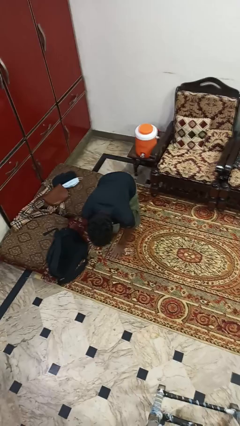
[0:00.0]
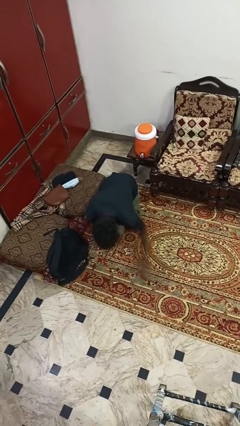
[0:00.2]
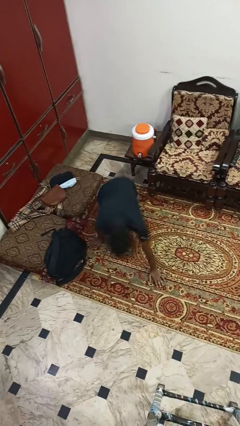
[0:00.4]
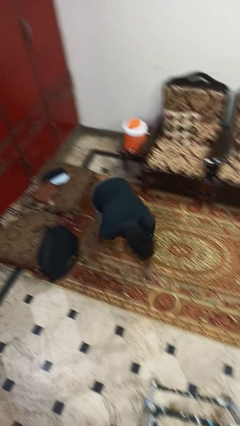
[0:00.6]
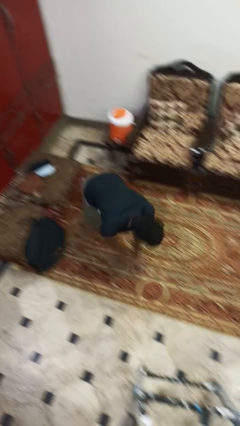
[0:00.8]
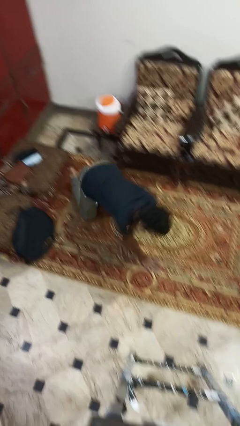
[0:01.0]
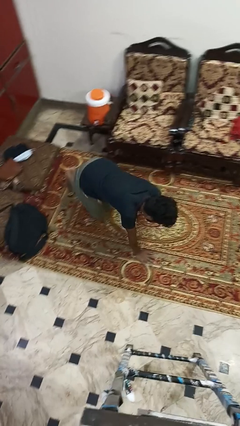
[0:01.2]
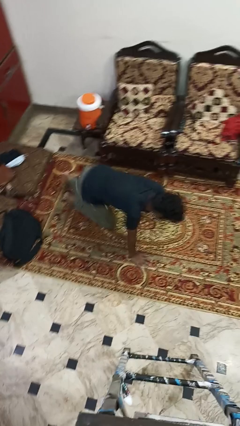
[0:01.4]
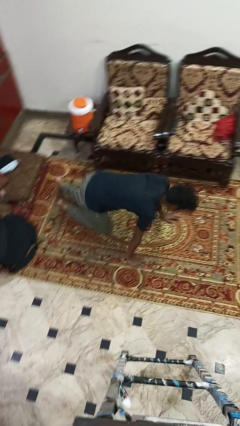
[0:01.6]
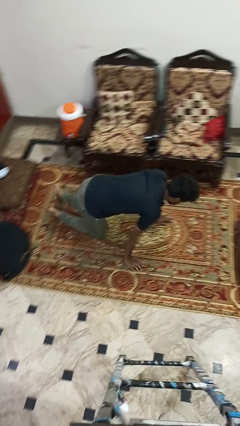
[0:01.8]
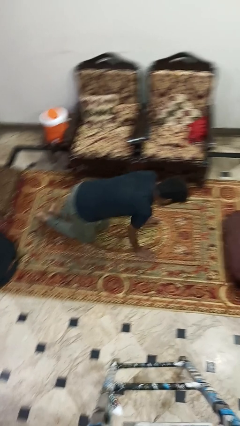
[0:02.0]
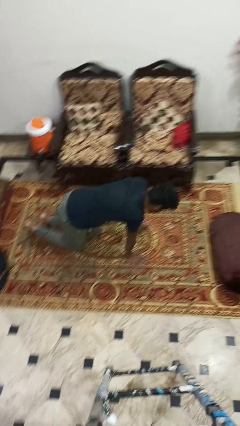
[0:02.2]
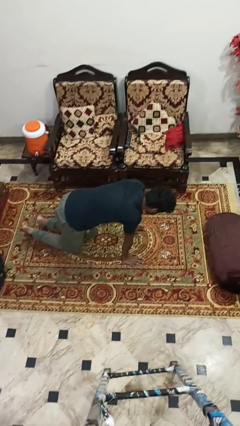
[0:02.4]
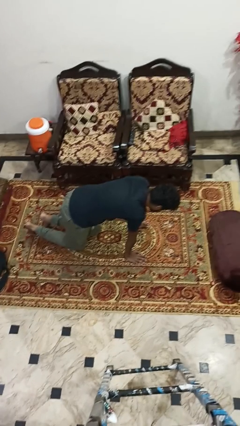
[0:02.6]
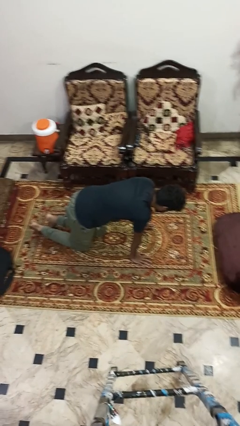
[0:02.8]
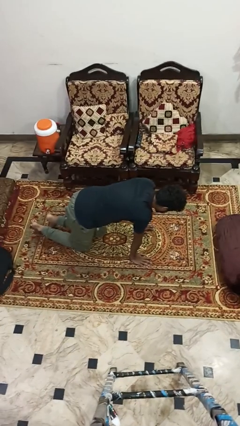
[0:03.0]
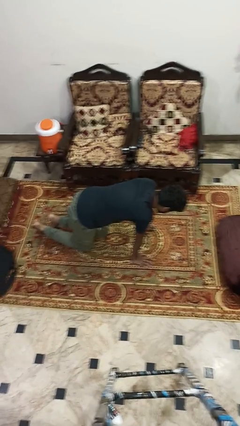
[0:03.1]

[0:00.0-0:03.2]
person crawls

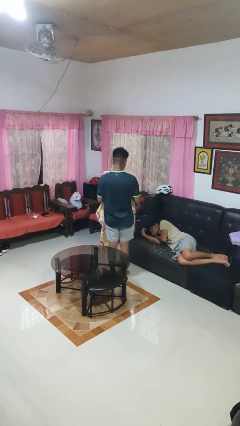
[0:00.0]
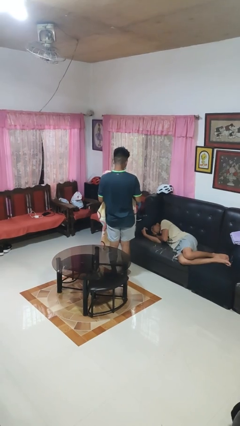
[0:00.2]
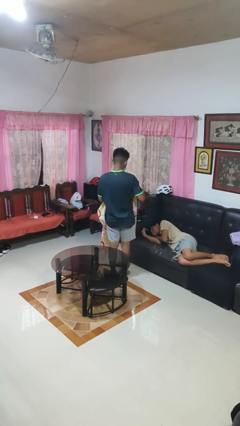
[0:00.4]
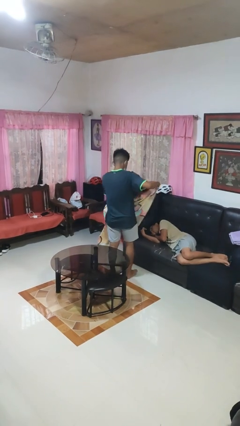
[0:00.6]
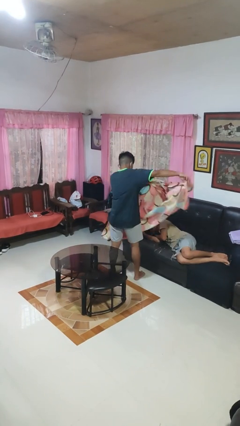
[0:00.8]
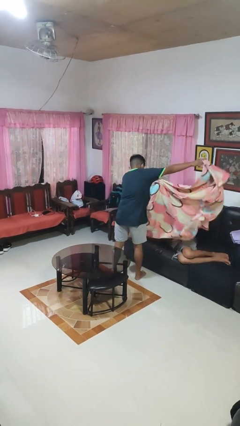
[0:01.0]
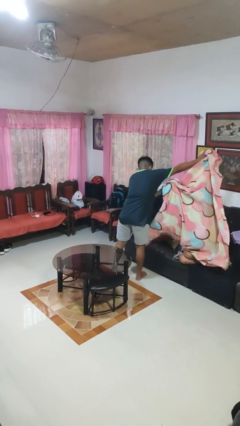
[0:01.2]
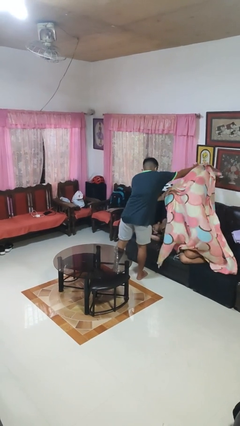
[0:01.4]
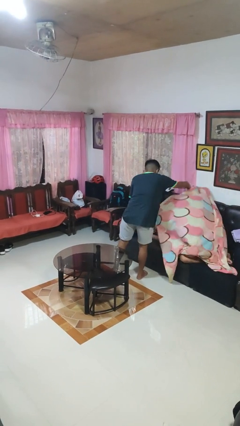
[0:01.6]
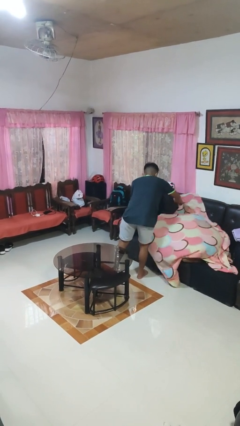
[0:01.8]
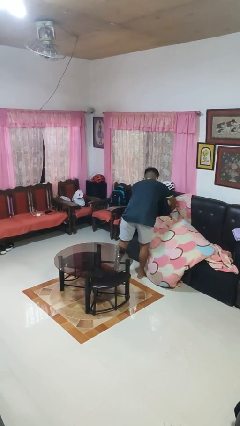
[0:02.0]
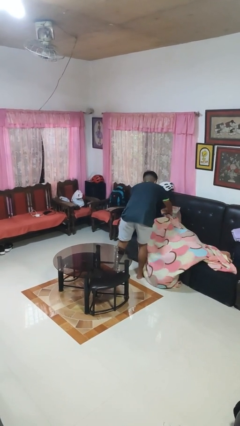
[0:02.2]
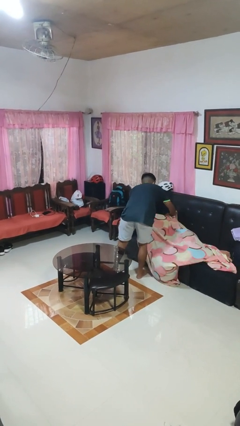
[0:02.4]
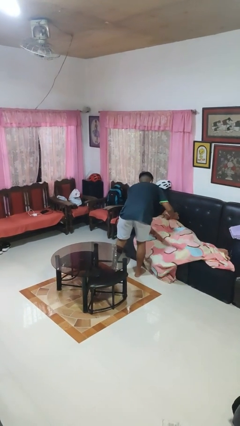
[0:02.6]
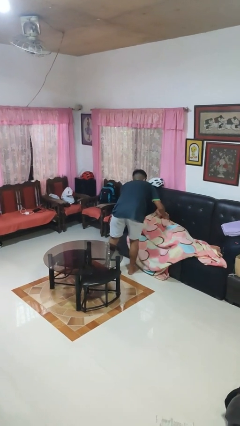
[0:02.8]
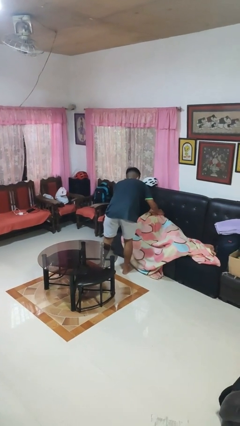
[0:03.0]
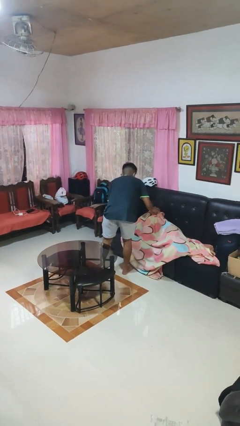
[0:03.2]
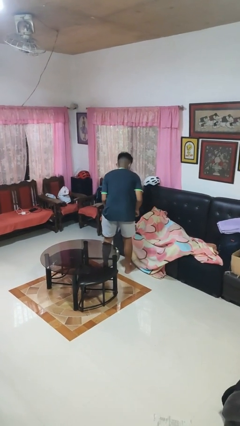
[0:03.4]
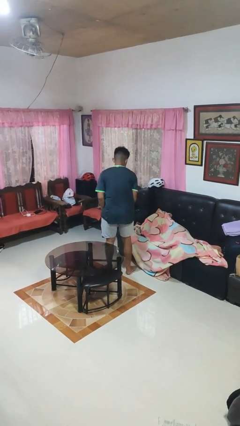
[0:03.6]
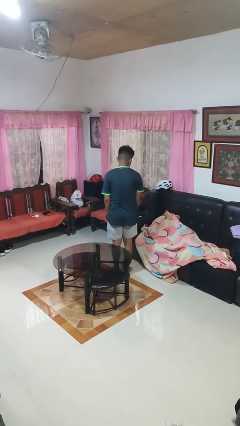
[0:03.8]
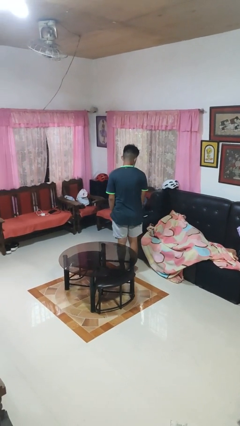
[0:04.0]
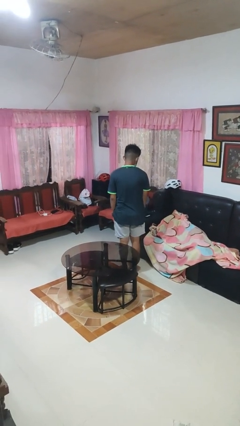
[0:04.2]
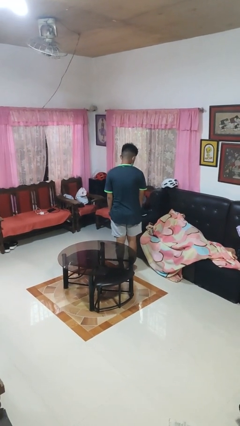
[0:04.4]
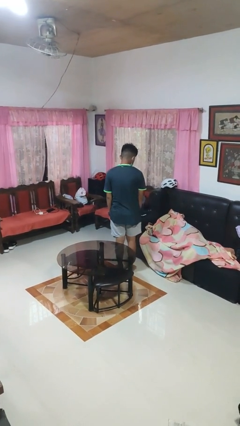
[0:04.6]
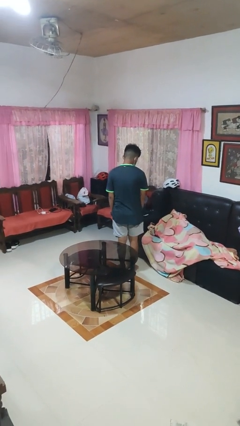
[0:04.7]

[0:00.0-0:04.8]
person covers friend with blanket

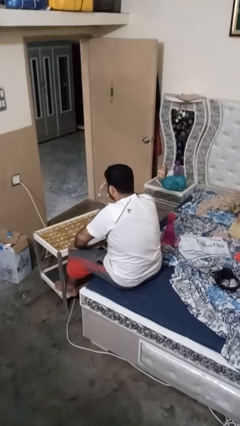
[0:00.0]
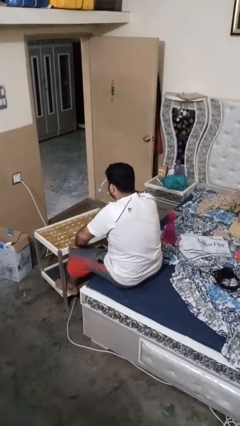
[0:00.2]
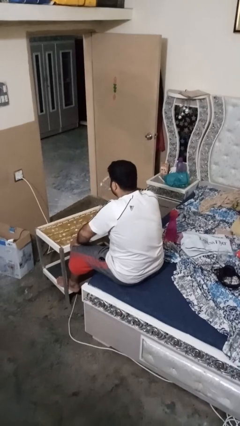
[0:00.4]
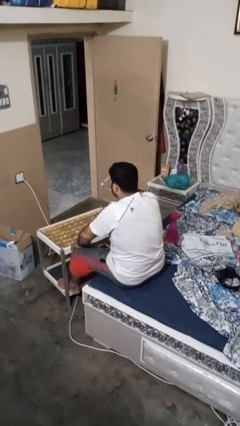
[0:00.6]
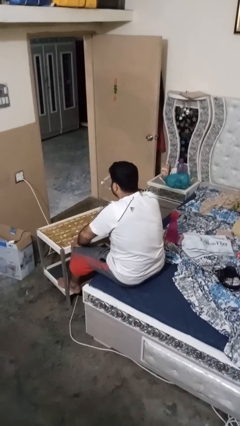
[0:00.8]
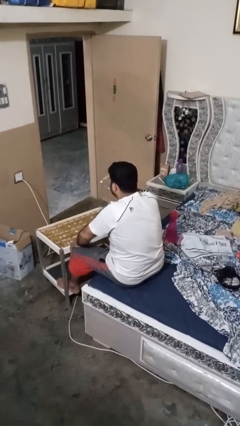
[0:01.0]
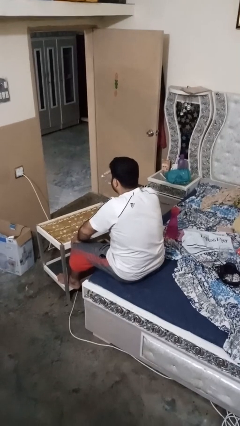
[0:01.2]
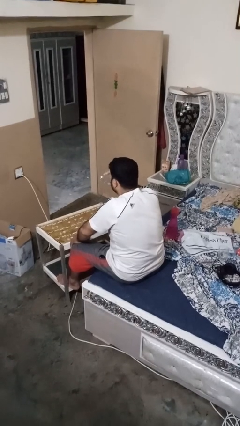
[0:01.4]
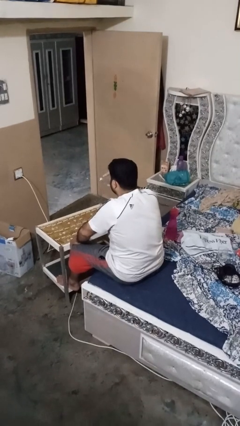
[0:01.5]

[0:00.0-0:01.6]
person drinks from shotglass

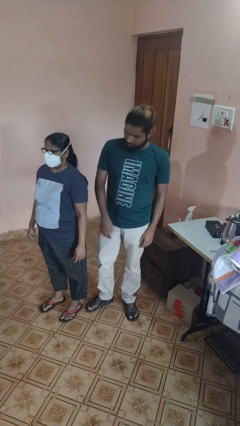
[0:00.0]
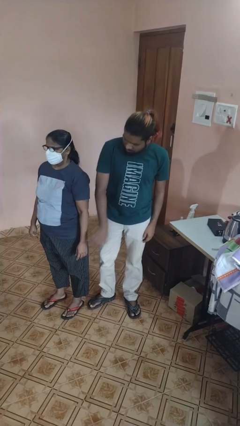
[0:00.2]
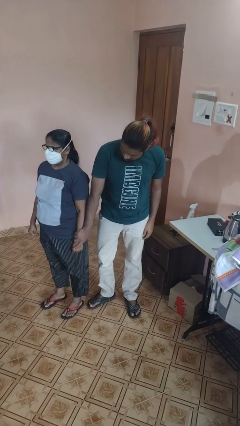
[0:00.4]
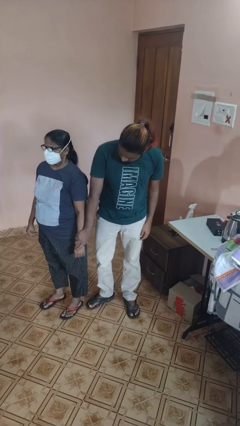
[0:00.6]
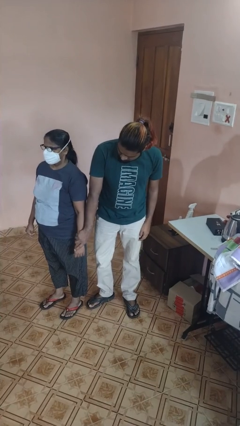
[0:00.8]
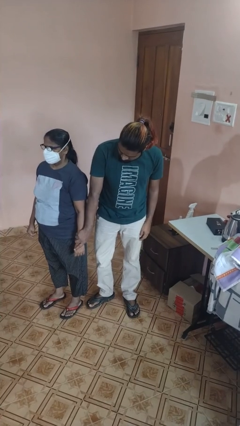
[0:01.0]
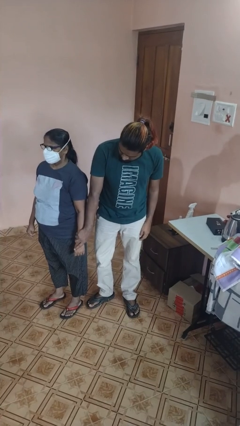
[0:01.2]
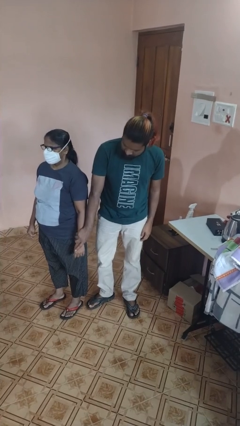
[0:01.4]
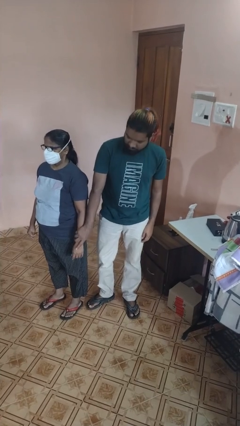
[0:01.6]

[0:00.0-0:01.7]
person grabs person by forearm

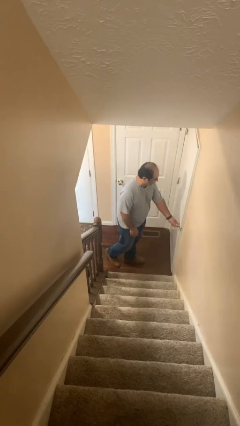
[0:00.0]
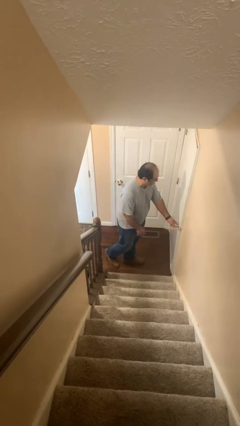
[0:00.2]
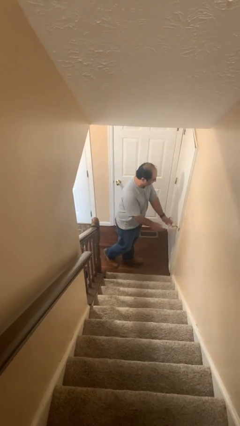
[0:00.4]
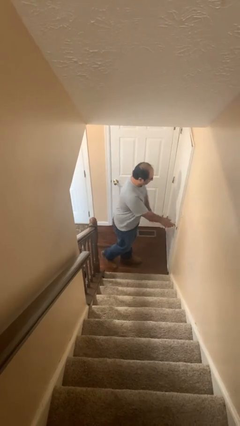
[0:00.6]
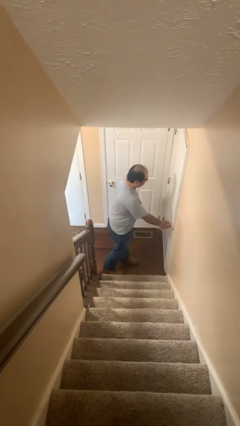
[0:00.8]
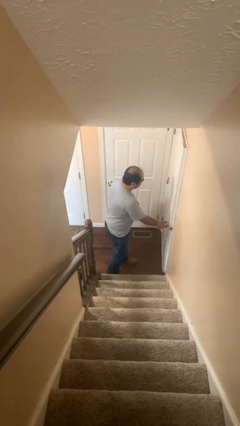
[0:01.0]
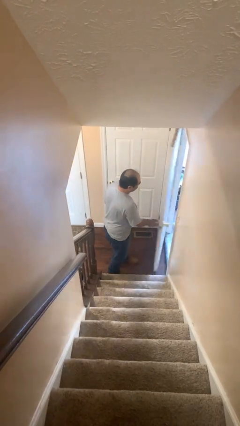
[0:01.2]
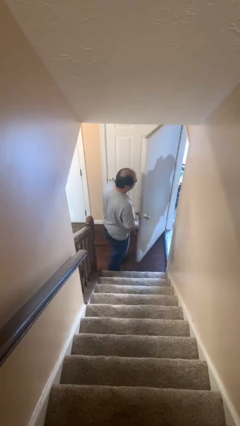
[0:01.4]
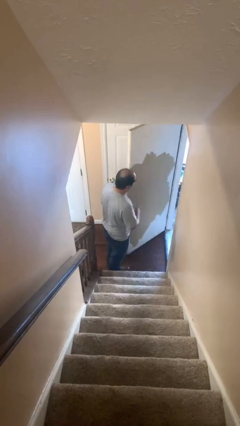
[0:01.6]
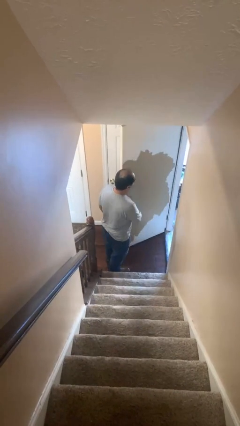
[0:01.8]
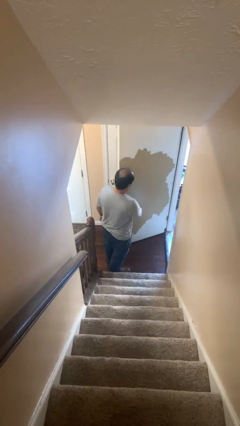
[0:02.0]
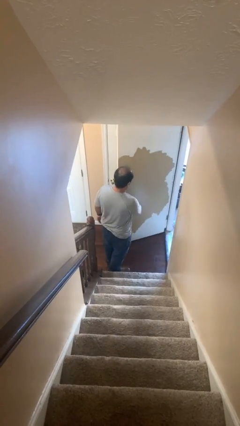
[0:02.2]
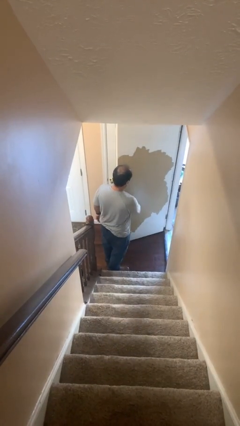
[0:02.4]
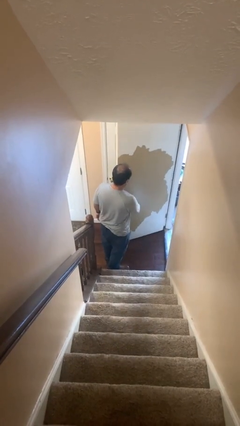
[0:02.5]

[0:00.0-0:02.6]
person opens facility door

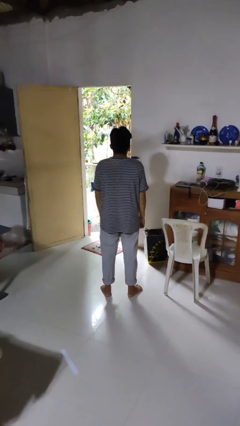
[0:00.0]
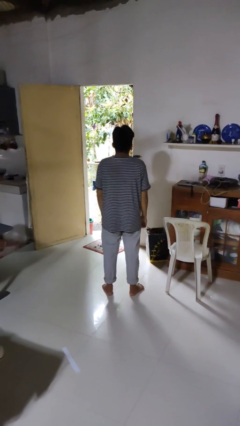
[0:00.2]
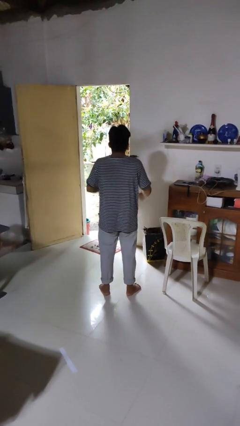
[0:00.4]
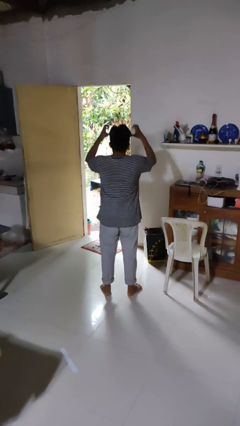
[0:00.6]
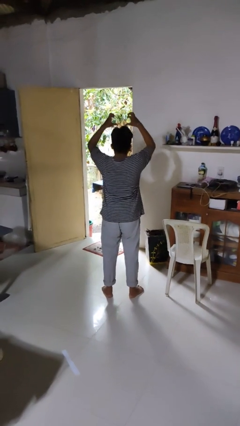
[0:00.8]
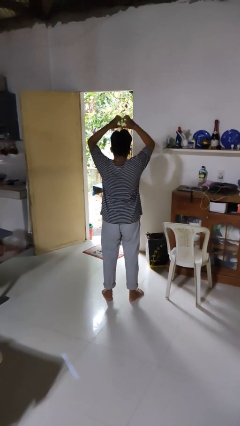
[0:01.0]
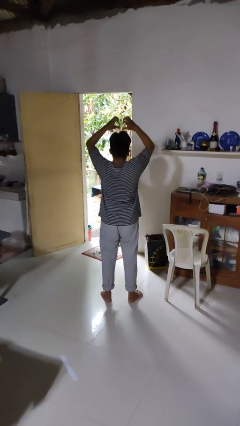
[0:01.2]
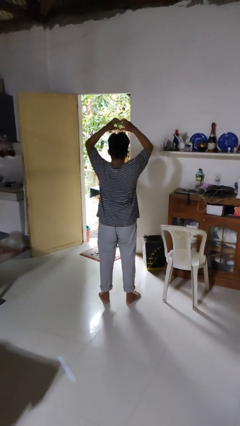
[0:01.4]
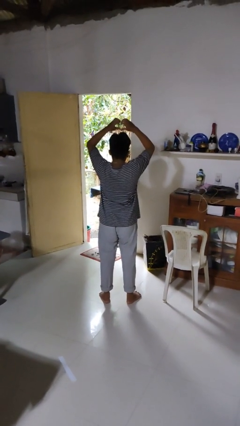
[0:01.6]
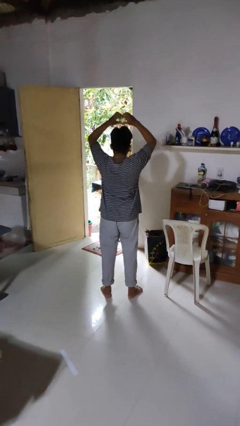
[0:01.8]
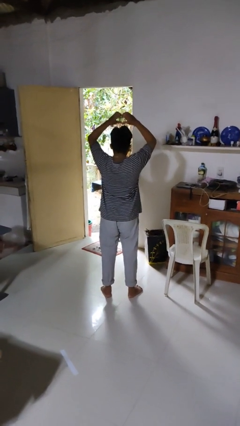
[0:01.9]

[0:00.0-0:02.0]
person gestures heart

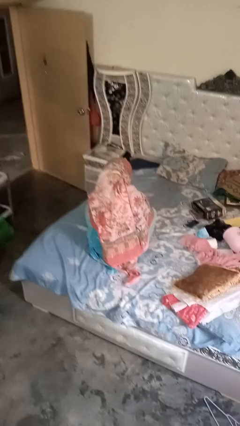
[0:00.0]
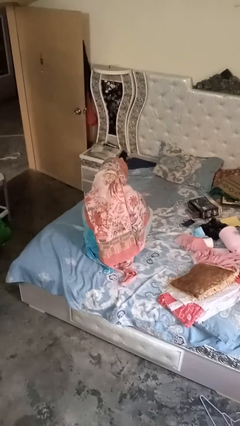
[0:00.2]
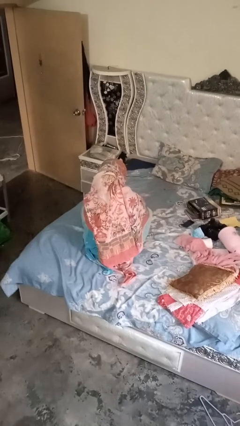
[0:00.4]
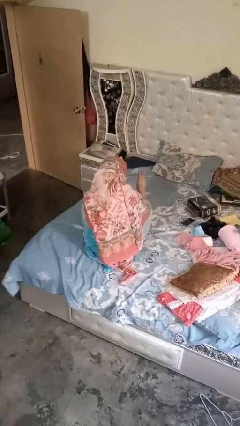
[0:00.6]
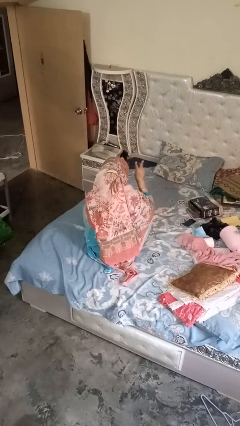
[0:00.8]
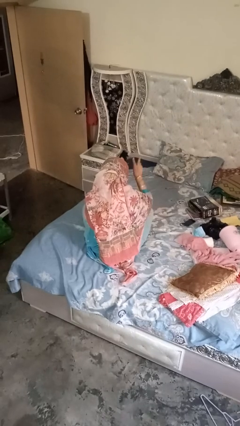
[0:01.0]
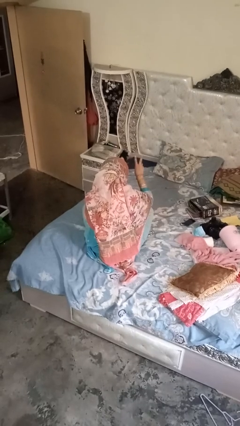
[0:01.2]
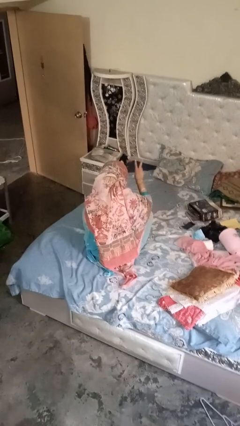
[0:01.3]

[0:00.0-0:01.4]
person gestures be quiet
